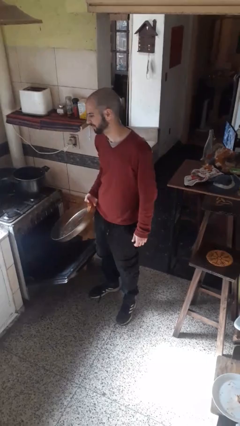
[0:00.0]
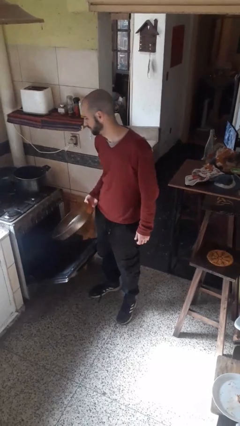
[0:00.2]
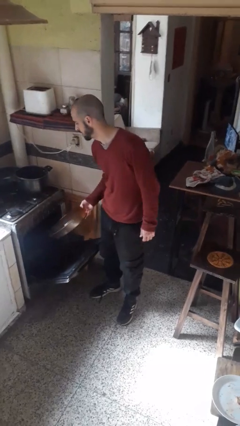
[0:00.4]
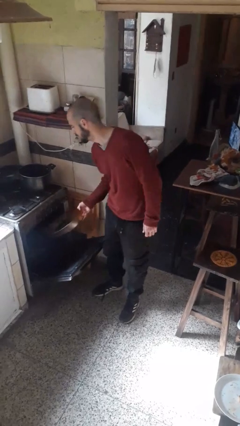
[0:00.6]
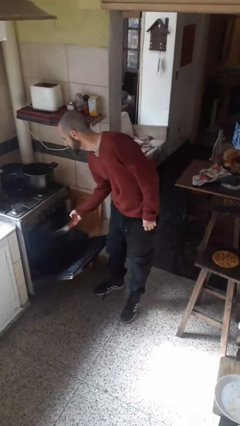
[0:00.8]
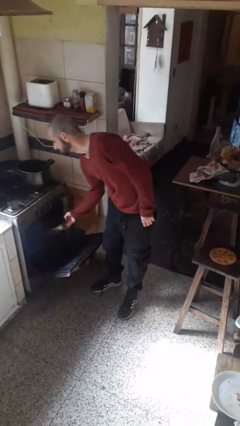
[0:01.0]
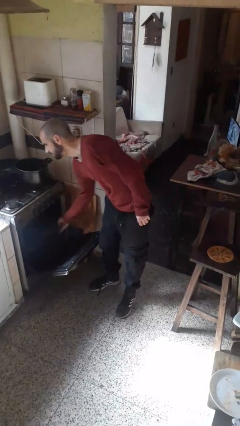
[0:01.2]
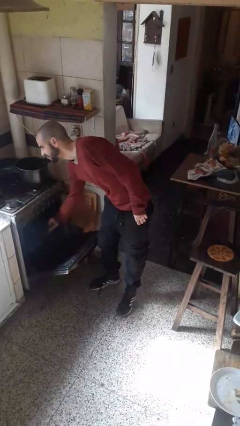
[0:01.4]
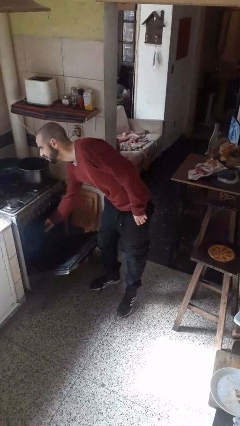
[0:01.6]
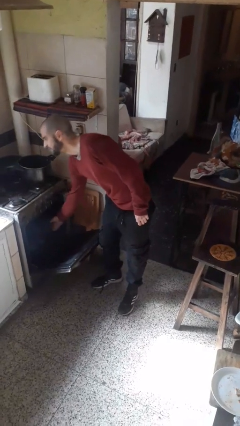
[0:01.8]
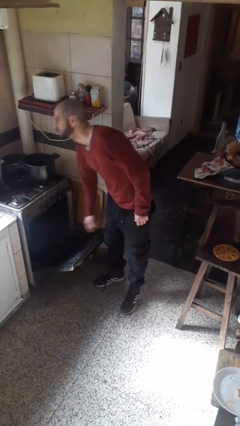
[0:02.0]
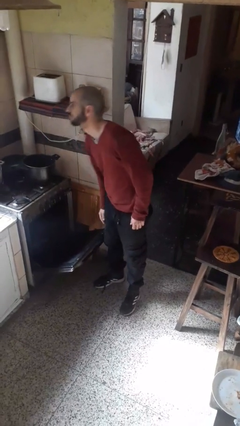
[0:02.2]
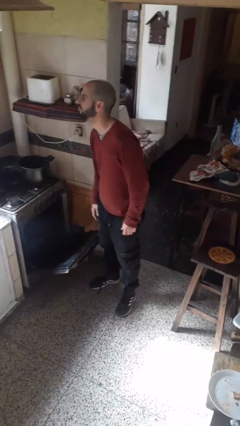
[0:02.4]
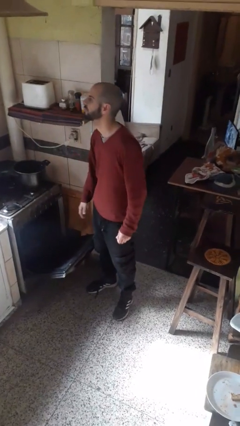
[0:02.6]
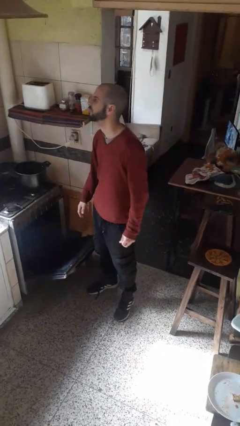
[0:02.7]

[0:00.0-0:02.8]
person puts object into oven

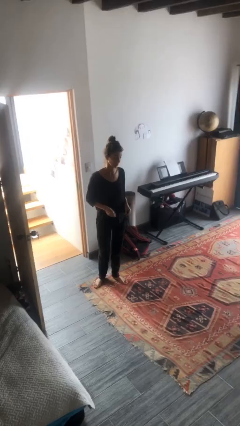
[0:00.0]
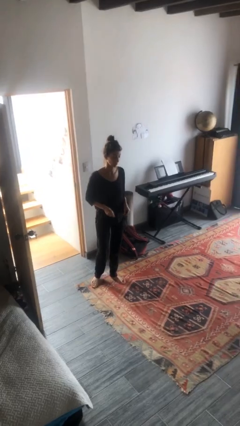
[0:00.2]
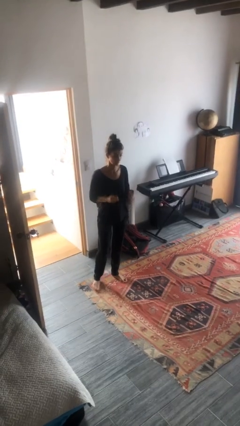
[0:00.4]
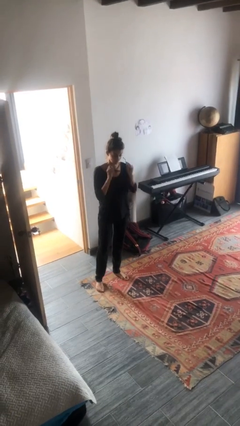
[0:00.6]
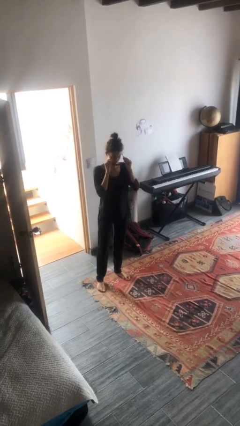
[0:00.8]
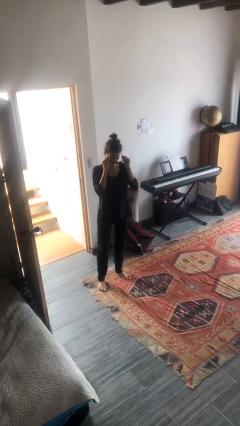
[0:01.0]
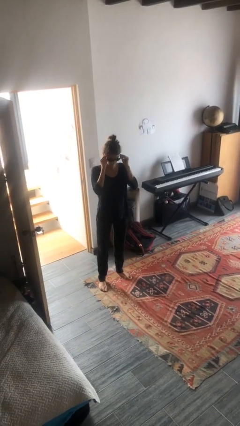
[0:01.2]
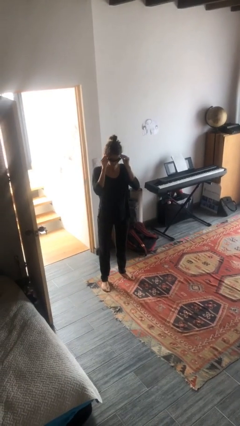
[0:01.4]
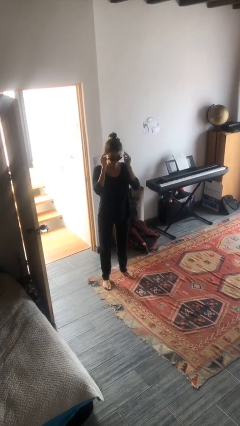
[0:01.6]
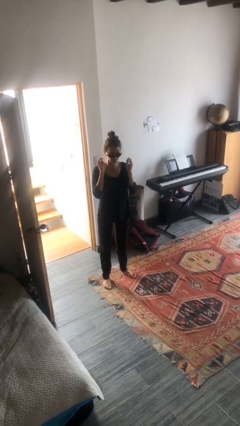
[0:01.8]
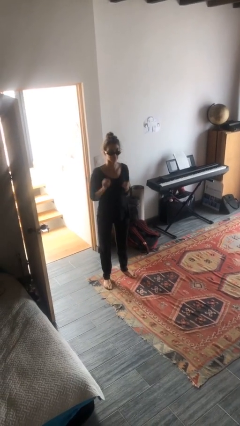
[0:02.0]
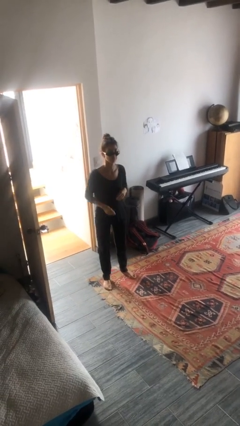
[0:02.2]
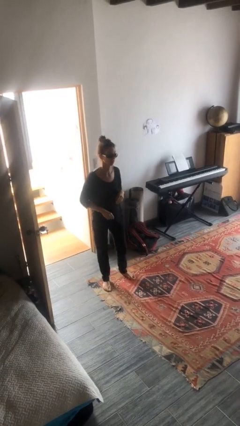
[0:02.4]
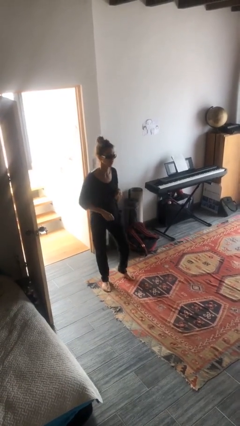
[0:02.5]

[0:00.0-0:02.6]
person puts on sunglasses

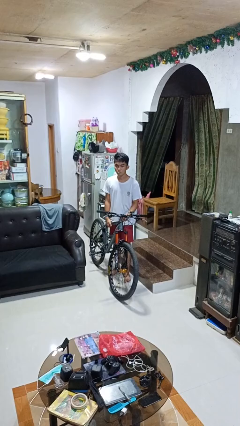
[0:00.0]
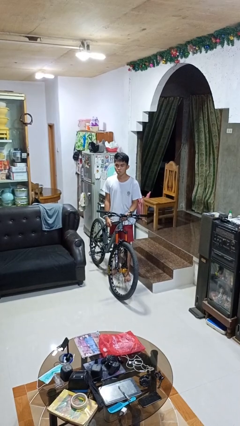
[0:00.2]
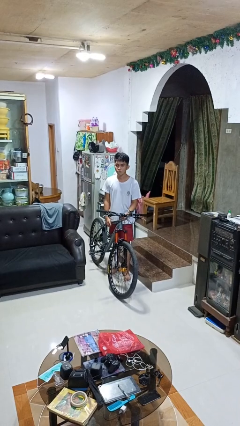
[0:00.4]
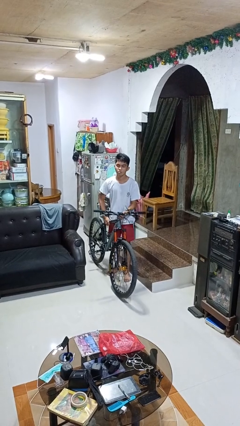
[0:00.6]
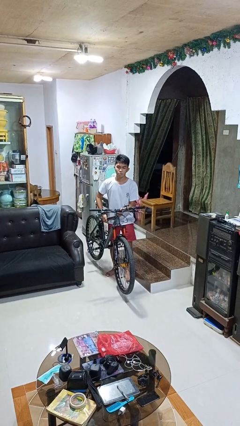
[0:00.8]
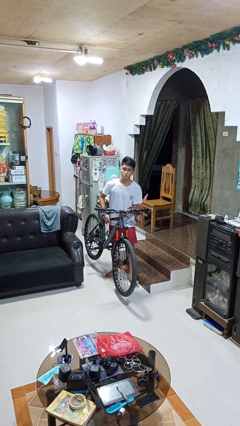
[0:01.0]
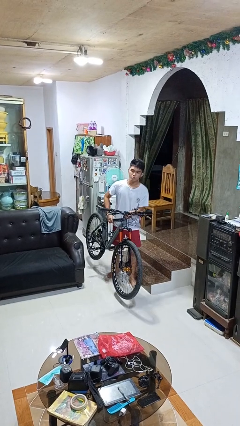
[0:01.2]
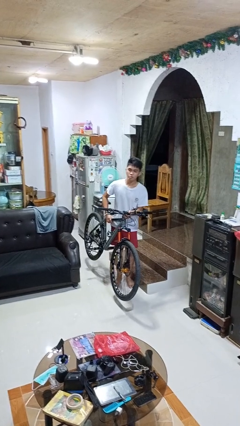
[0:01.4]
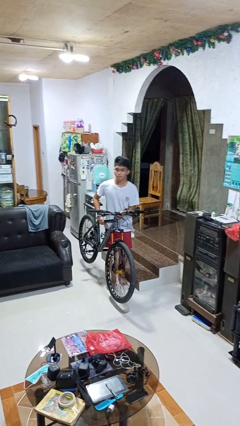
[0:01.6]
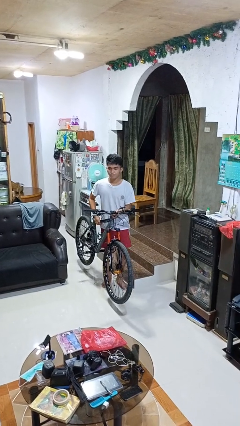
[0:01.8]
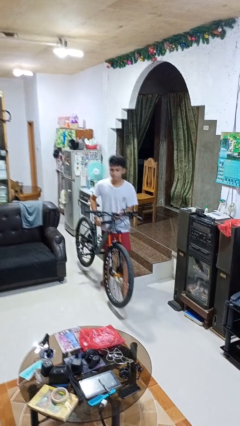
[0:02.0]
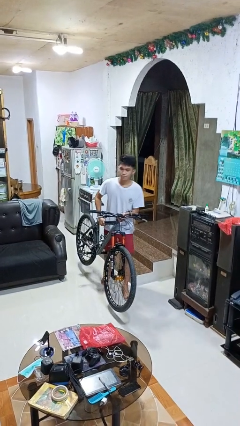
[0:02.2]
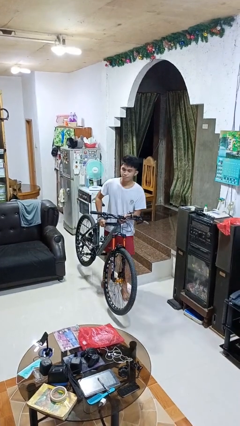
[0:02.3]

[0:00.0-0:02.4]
person carries bicycle

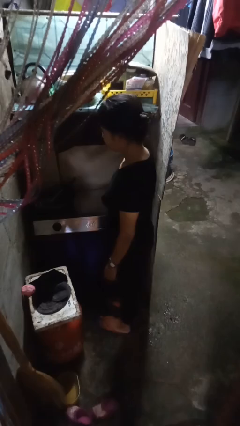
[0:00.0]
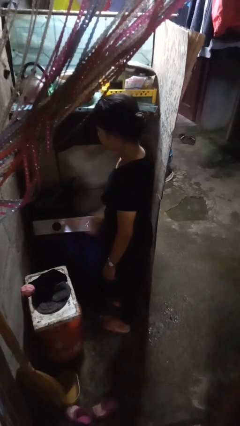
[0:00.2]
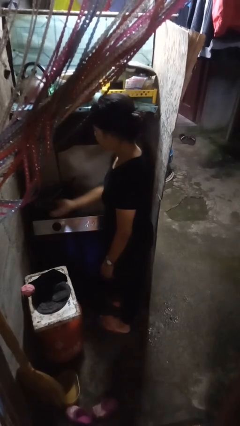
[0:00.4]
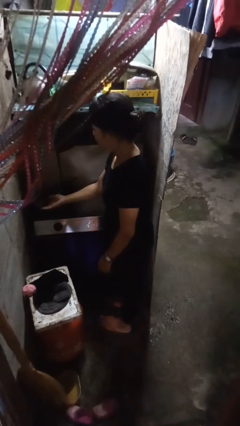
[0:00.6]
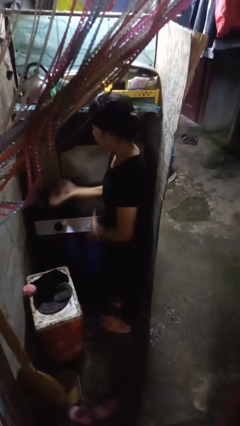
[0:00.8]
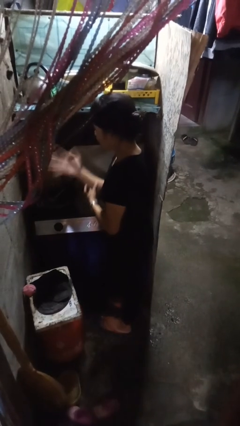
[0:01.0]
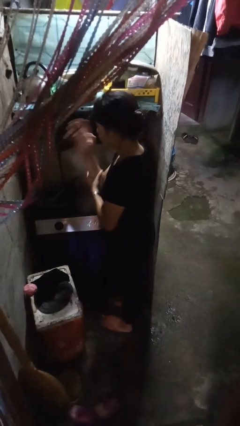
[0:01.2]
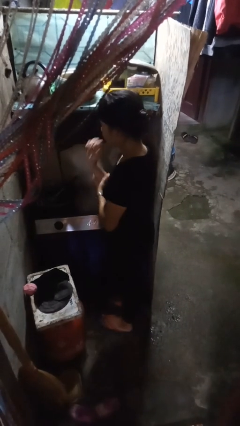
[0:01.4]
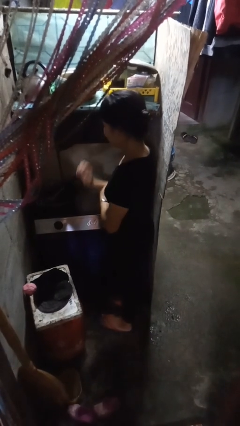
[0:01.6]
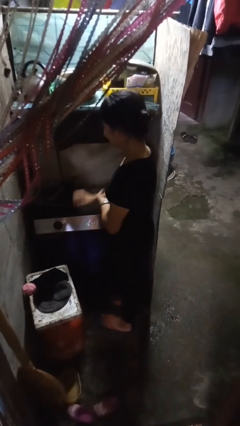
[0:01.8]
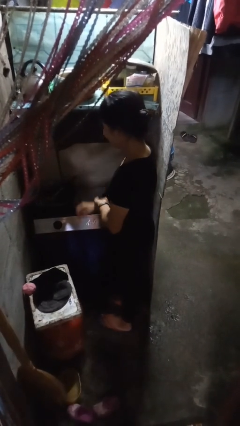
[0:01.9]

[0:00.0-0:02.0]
person burns hand

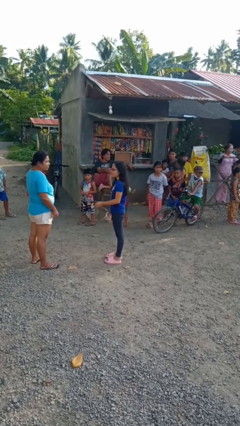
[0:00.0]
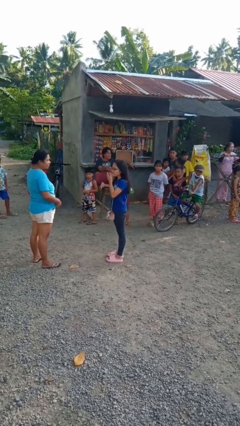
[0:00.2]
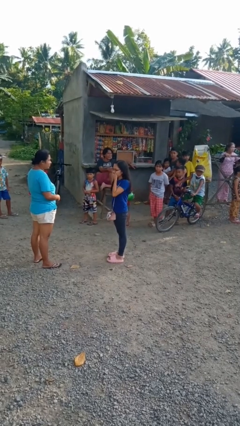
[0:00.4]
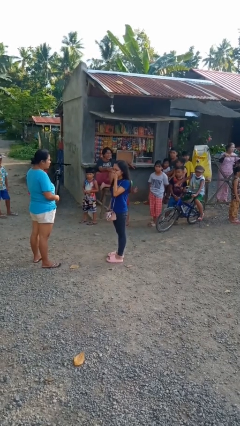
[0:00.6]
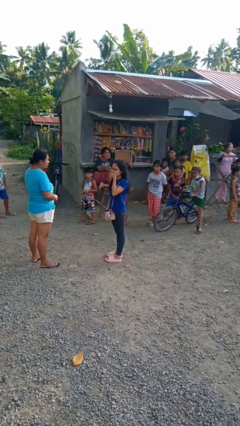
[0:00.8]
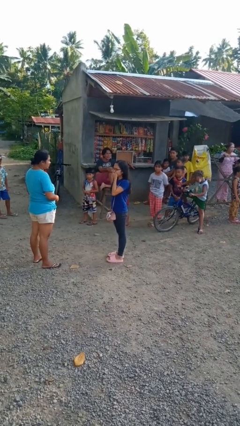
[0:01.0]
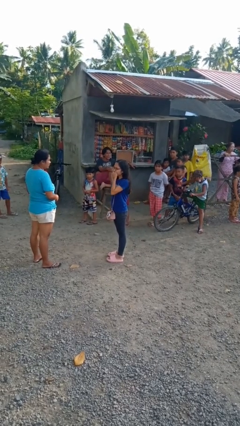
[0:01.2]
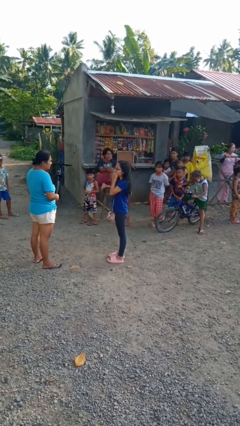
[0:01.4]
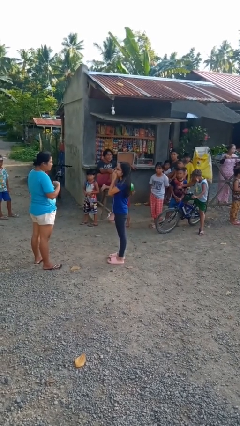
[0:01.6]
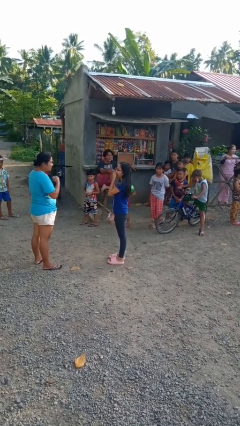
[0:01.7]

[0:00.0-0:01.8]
person laughs with person

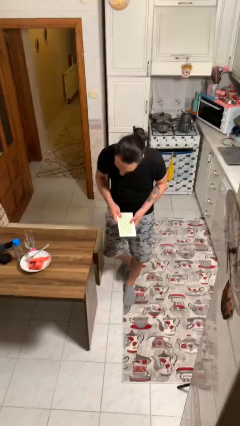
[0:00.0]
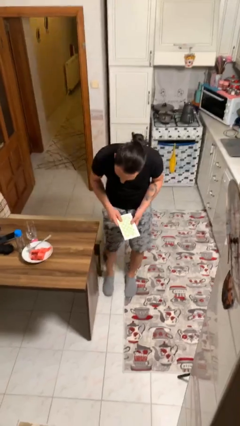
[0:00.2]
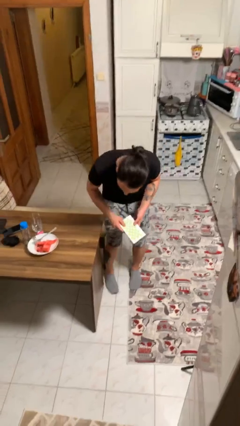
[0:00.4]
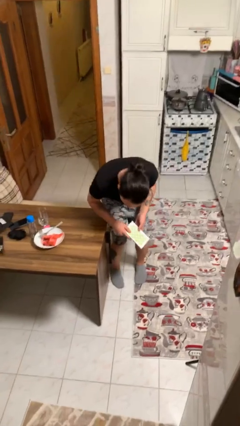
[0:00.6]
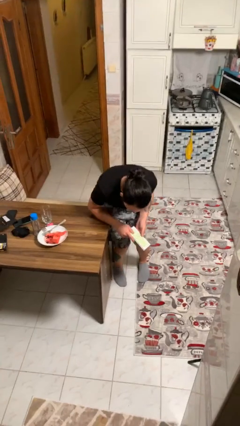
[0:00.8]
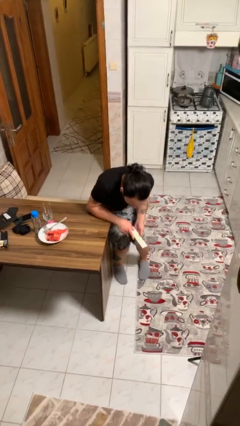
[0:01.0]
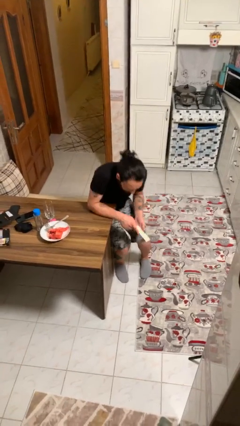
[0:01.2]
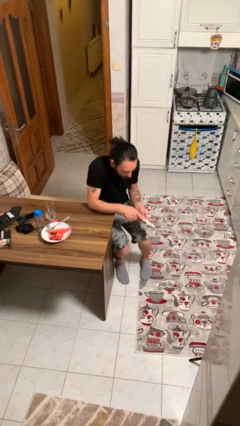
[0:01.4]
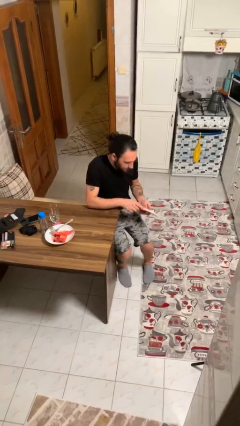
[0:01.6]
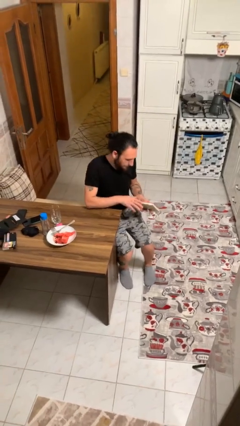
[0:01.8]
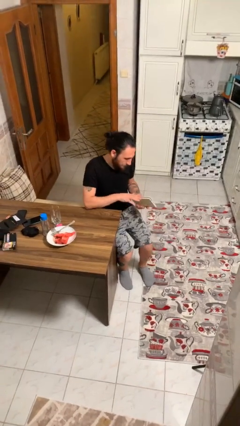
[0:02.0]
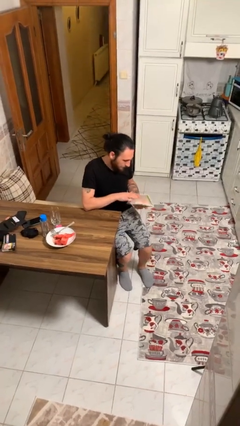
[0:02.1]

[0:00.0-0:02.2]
person sits down

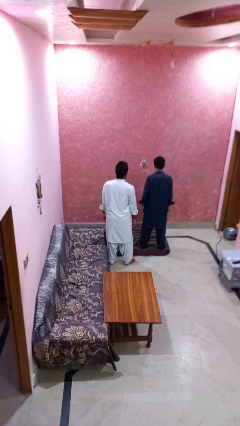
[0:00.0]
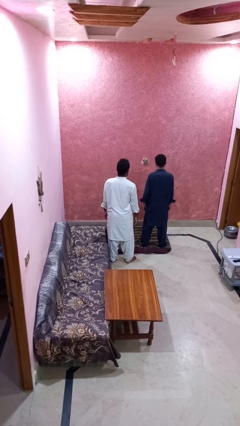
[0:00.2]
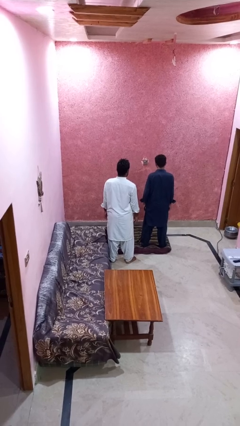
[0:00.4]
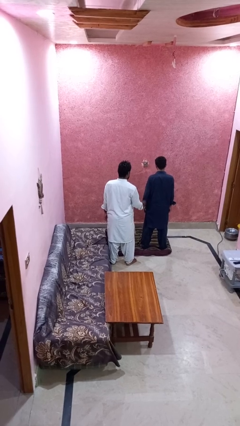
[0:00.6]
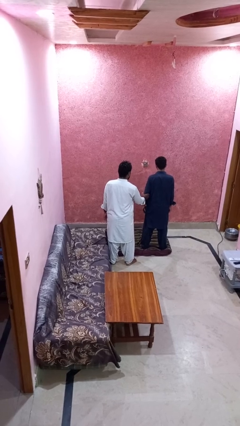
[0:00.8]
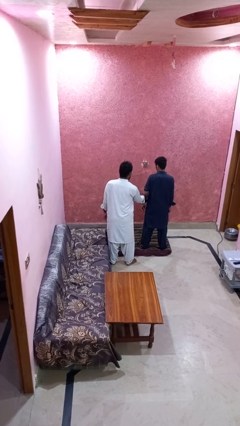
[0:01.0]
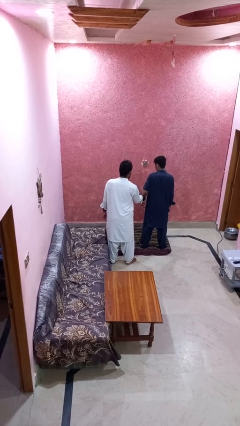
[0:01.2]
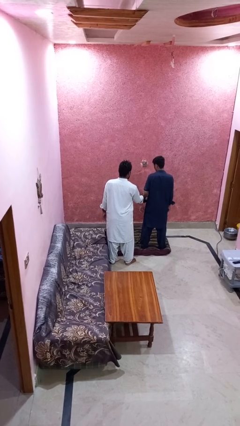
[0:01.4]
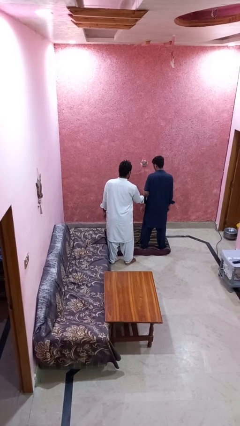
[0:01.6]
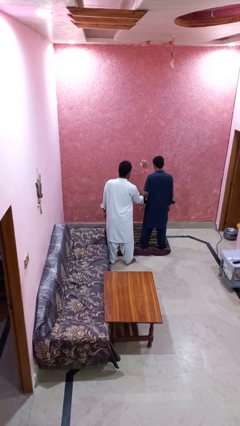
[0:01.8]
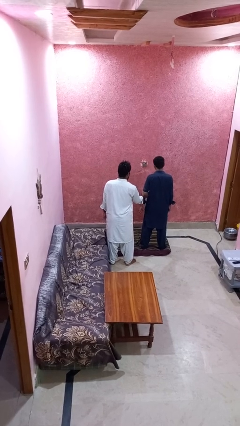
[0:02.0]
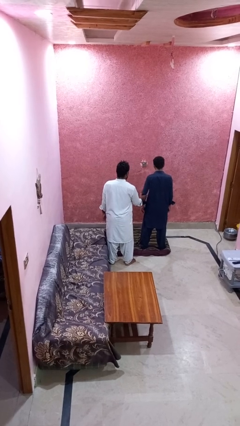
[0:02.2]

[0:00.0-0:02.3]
person grabs person by bicep

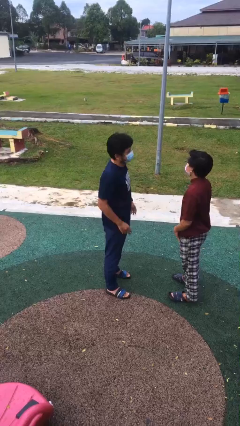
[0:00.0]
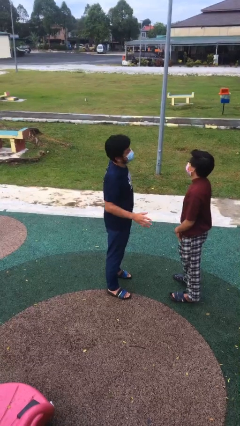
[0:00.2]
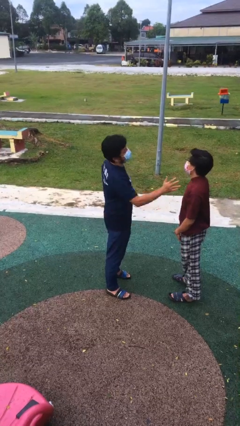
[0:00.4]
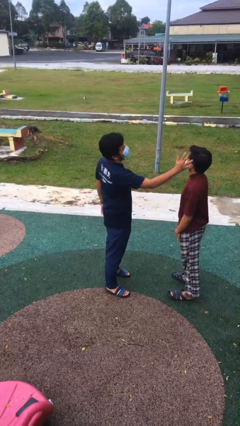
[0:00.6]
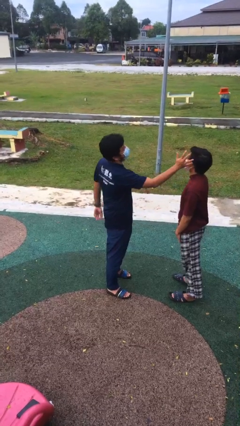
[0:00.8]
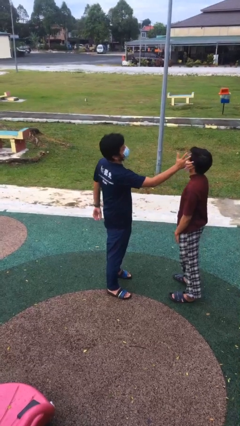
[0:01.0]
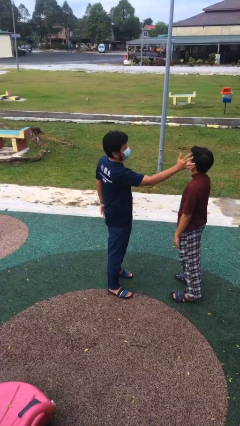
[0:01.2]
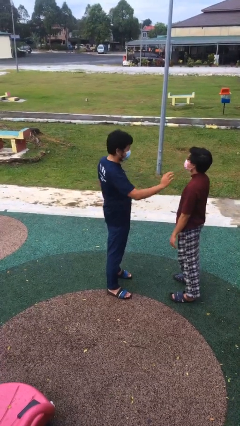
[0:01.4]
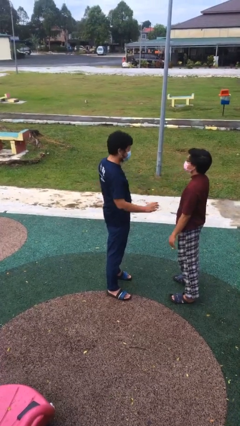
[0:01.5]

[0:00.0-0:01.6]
person touches face of person
